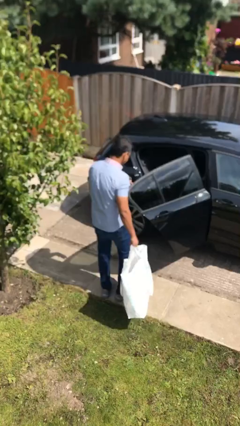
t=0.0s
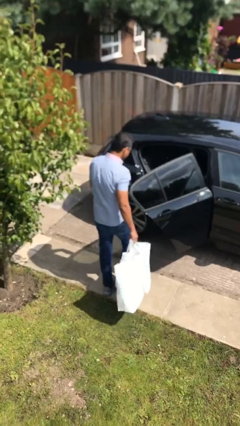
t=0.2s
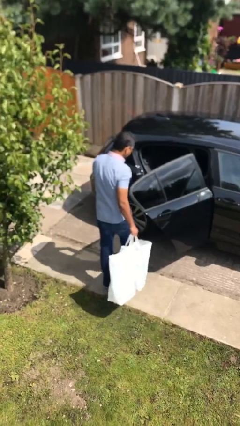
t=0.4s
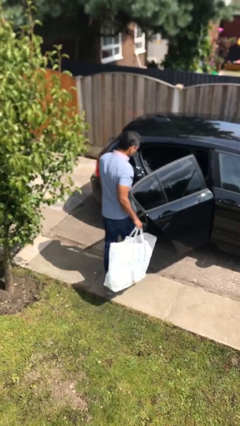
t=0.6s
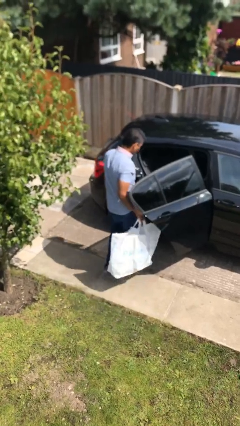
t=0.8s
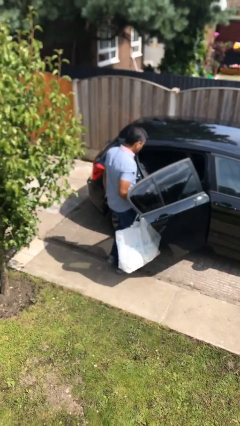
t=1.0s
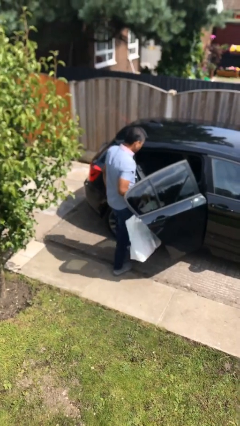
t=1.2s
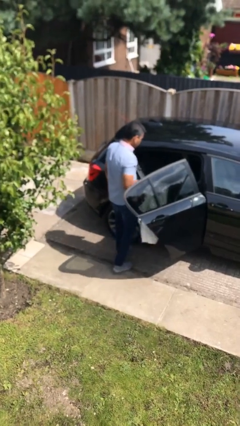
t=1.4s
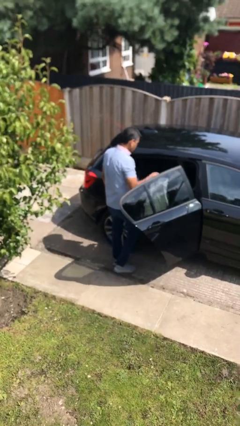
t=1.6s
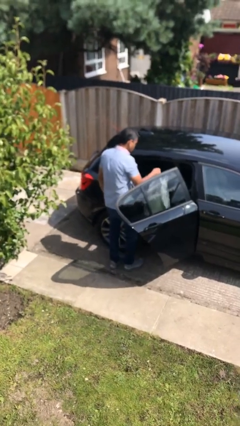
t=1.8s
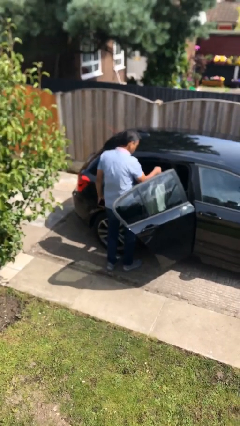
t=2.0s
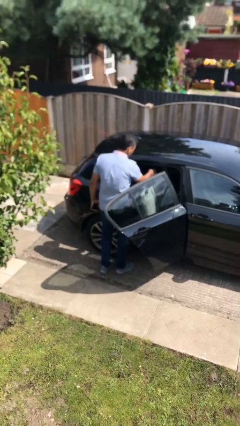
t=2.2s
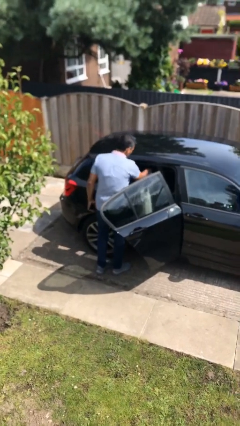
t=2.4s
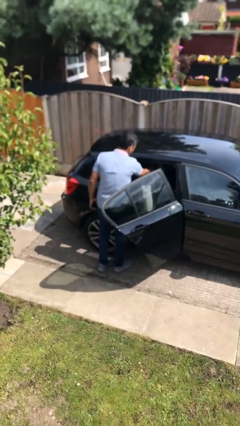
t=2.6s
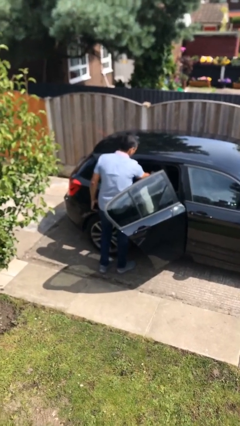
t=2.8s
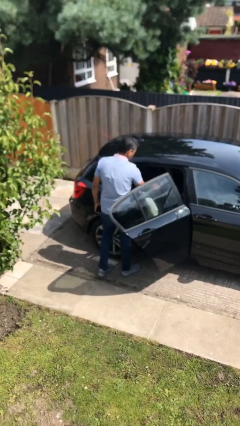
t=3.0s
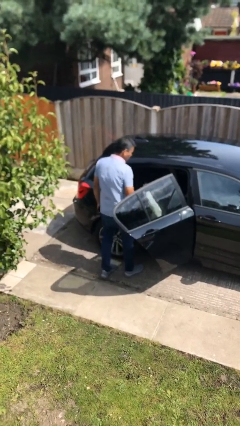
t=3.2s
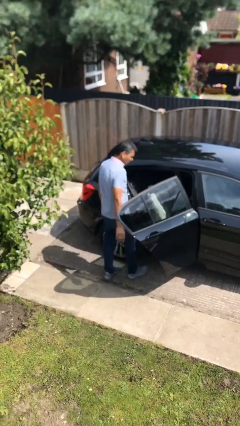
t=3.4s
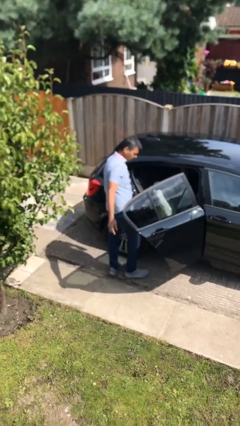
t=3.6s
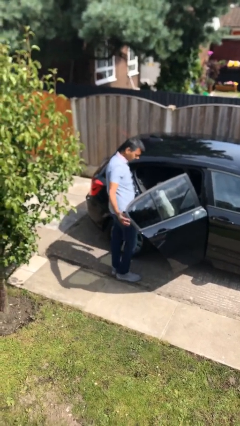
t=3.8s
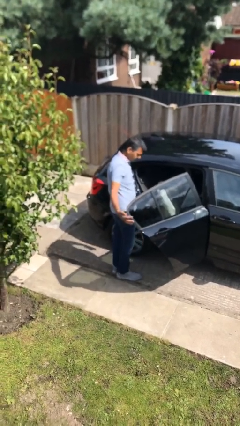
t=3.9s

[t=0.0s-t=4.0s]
person loads car

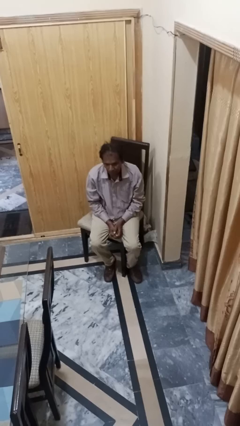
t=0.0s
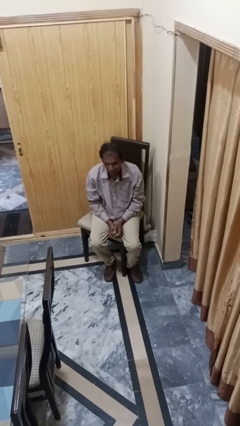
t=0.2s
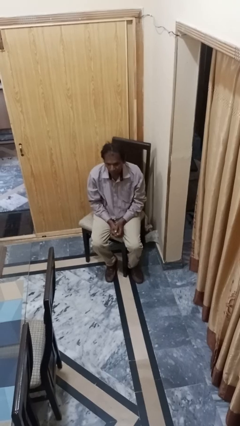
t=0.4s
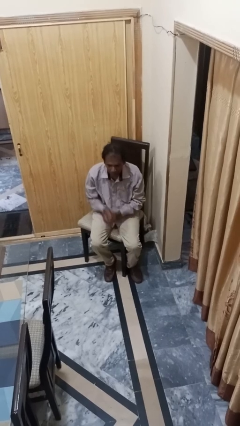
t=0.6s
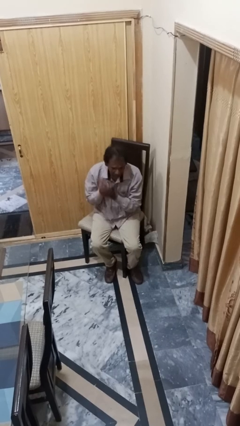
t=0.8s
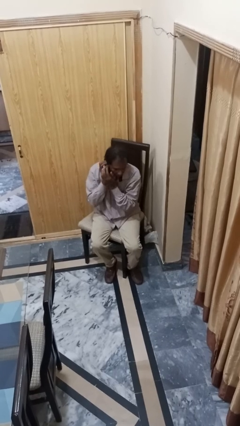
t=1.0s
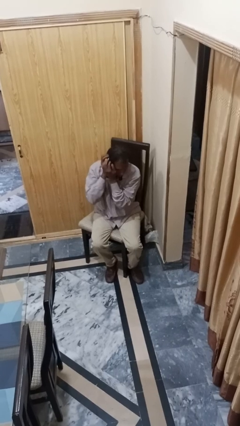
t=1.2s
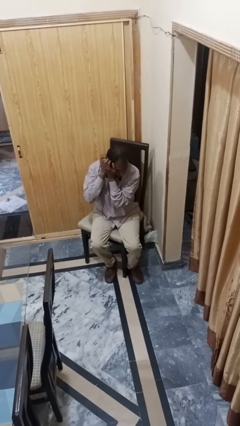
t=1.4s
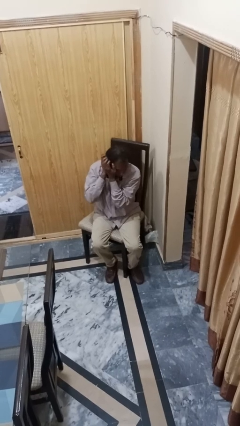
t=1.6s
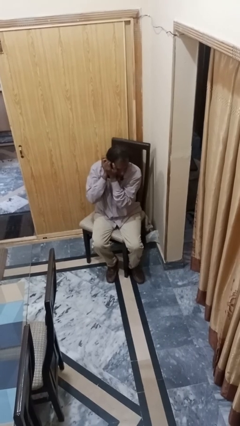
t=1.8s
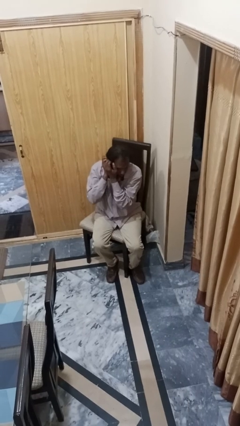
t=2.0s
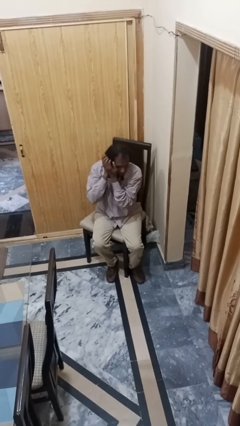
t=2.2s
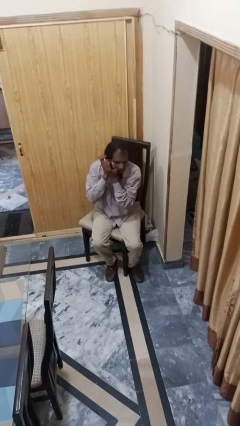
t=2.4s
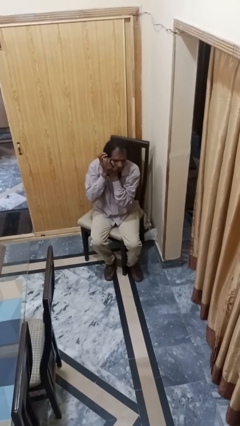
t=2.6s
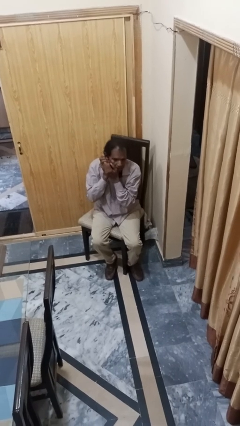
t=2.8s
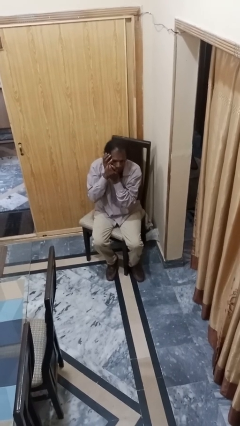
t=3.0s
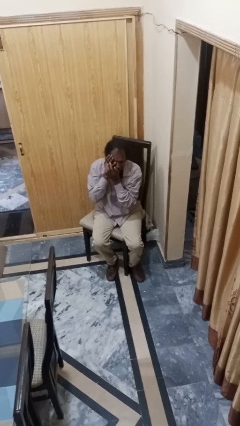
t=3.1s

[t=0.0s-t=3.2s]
person scratches face

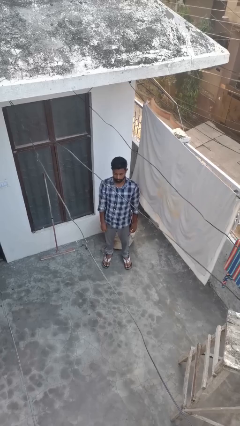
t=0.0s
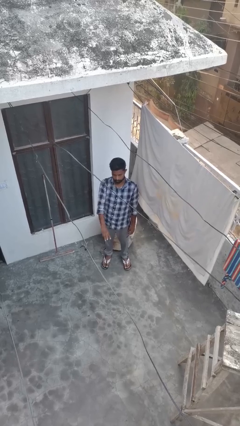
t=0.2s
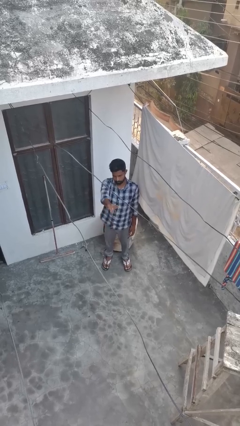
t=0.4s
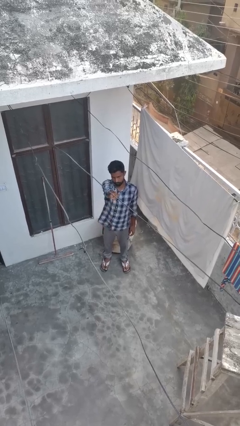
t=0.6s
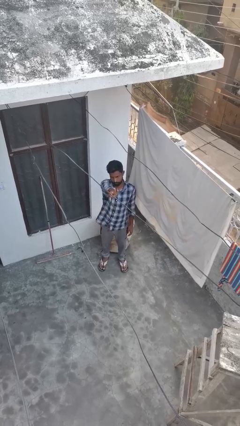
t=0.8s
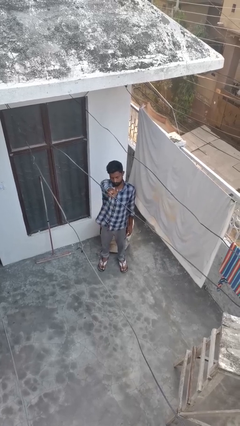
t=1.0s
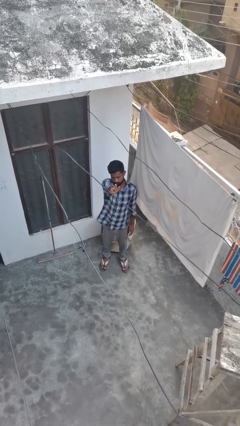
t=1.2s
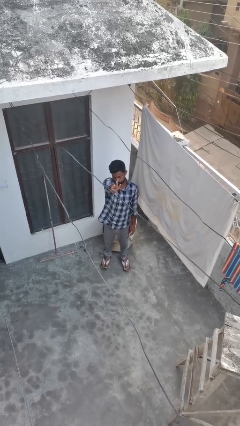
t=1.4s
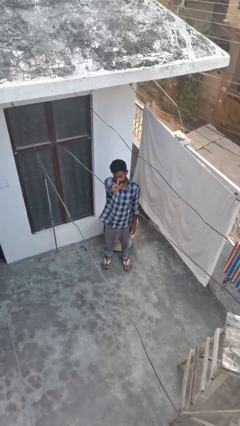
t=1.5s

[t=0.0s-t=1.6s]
person gestures number three

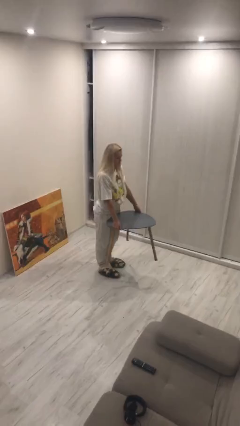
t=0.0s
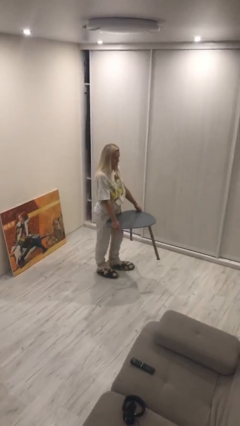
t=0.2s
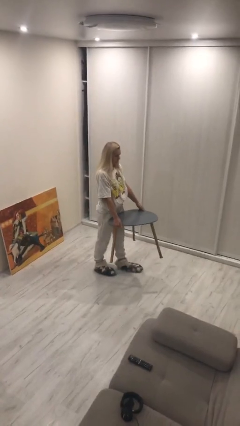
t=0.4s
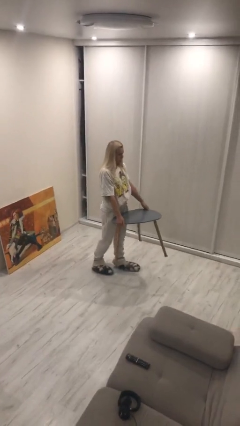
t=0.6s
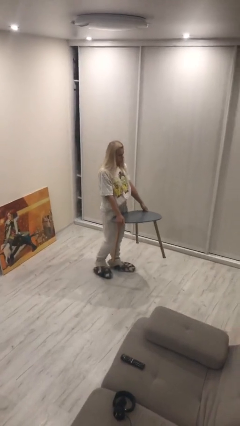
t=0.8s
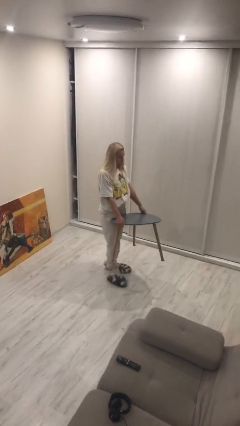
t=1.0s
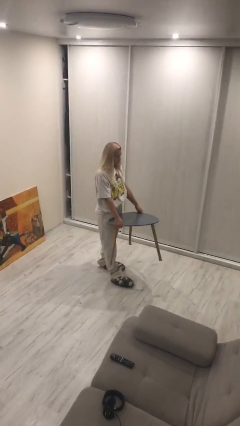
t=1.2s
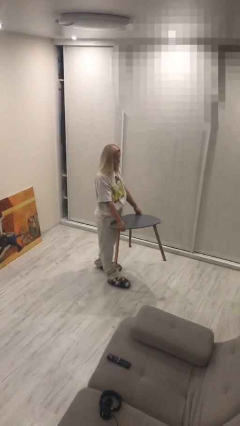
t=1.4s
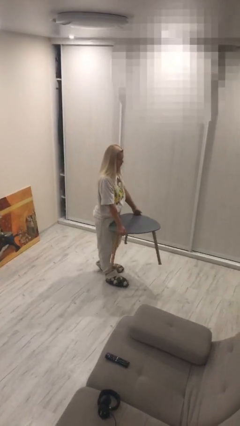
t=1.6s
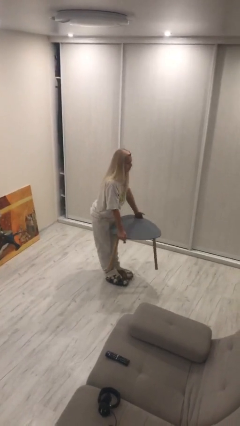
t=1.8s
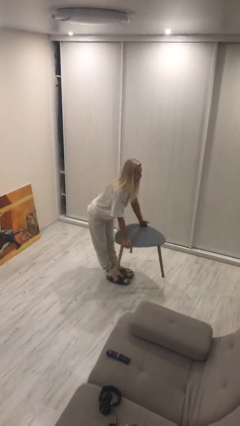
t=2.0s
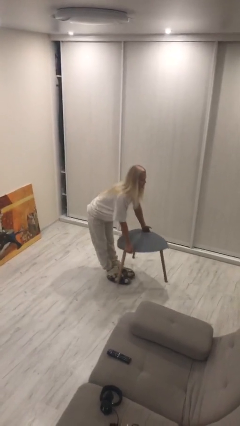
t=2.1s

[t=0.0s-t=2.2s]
person carries heavy object

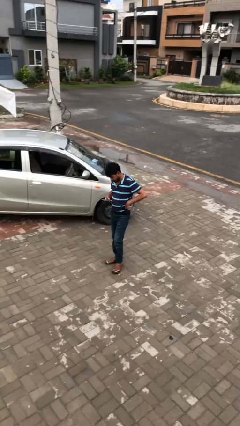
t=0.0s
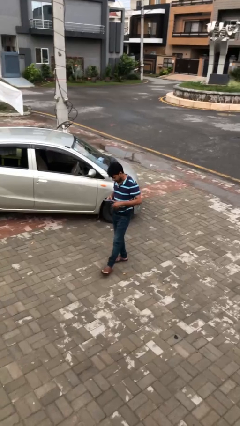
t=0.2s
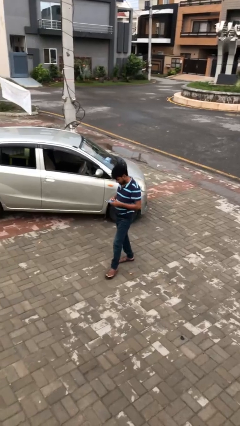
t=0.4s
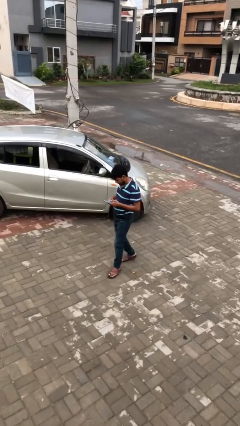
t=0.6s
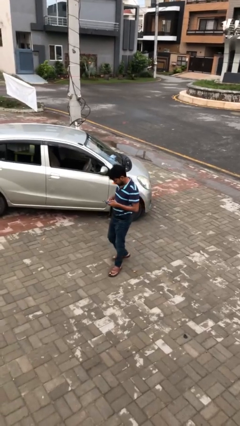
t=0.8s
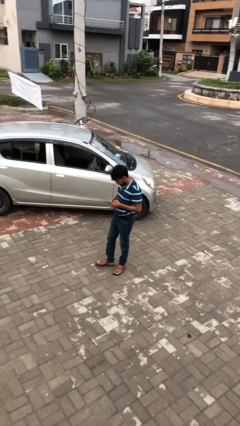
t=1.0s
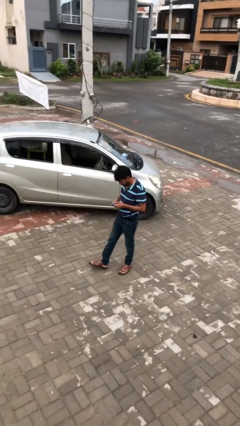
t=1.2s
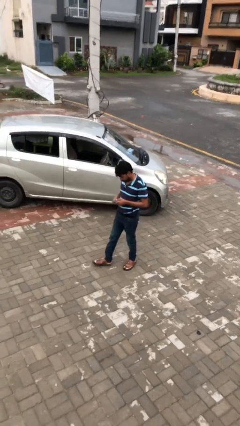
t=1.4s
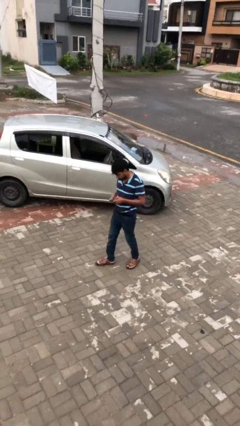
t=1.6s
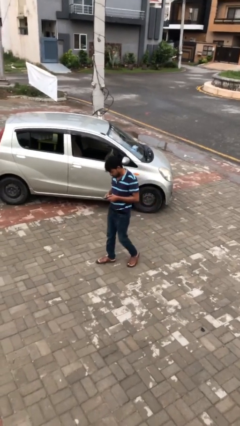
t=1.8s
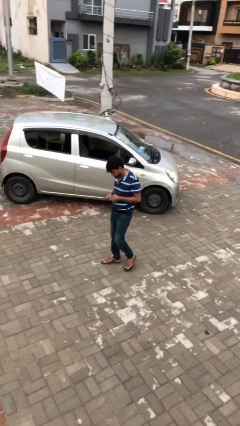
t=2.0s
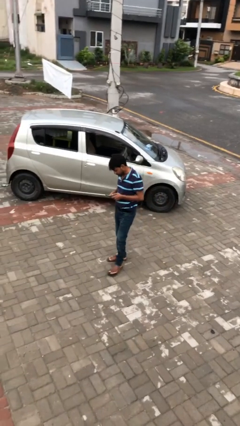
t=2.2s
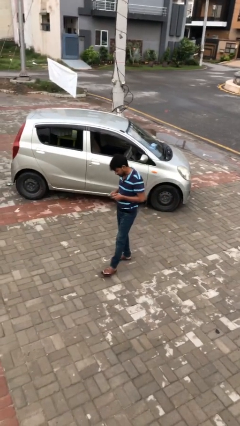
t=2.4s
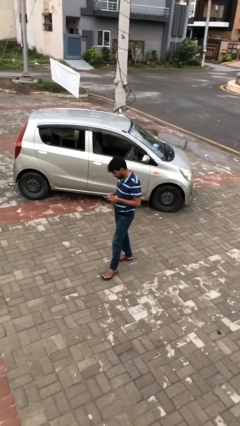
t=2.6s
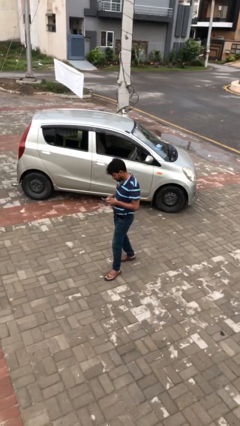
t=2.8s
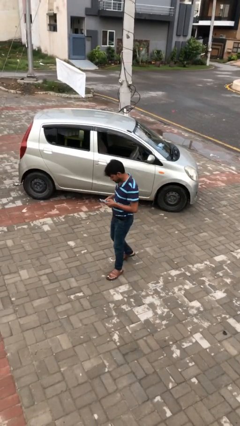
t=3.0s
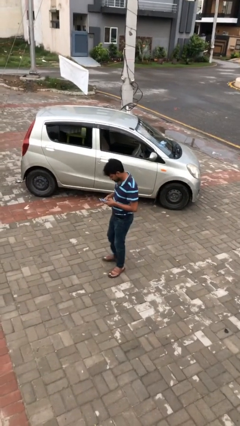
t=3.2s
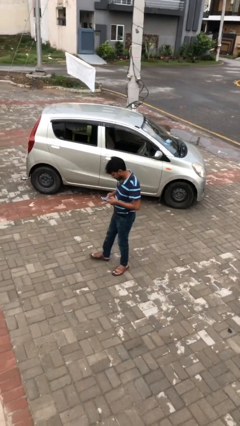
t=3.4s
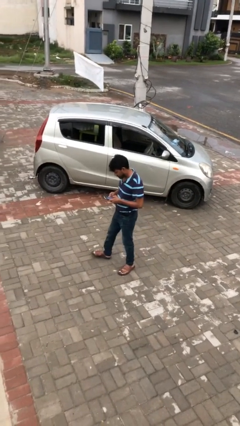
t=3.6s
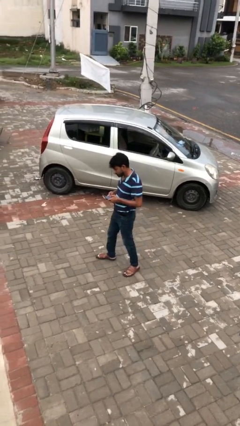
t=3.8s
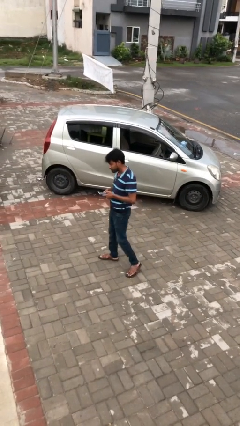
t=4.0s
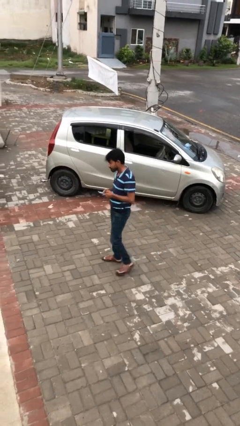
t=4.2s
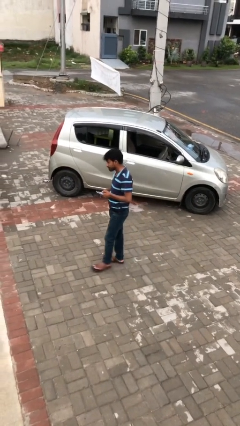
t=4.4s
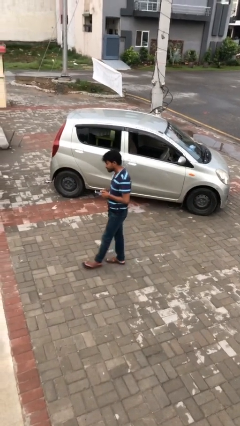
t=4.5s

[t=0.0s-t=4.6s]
person texts on phone

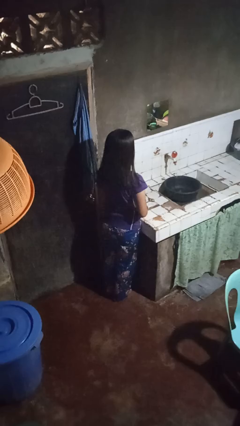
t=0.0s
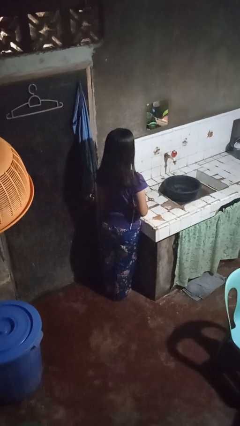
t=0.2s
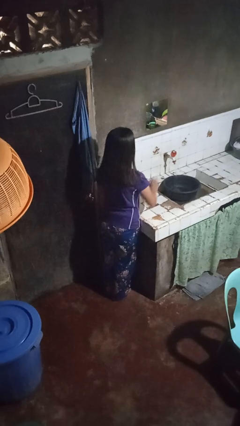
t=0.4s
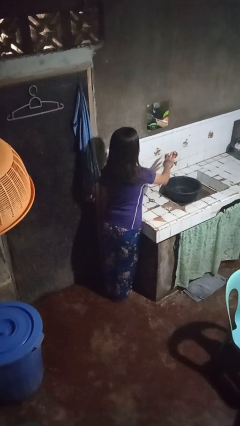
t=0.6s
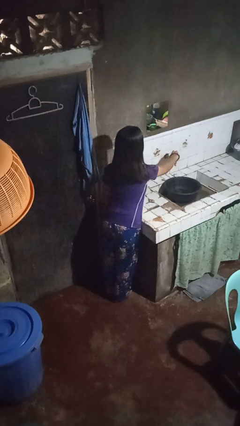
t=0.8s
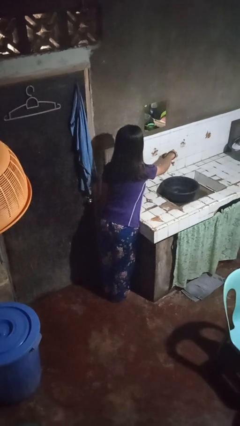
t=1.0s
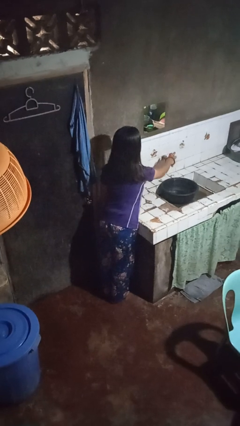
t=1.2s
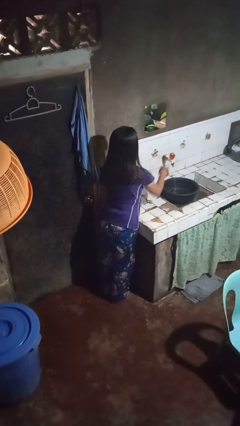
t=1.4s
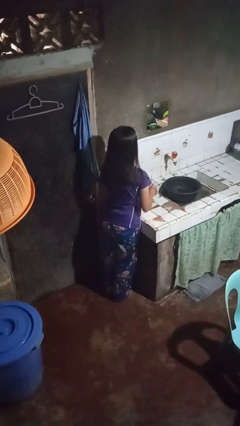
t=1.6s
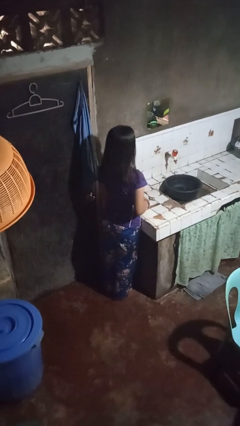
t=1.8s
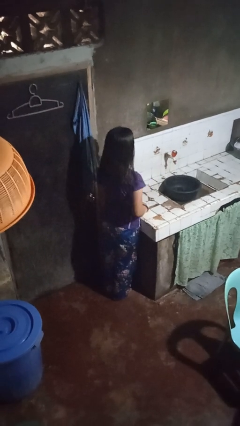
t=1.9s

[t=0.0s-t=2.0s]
person turns off faucet
